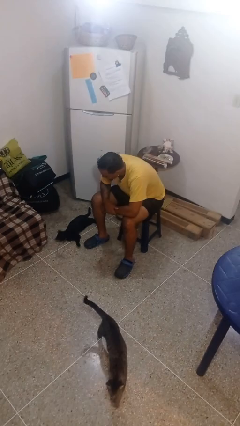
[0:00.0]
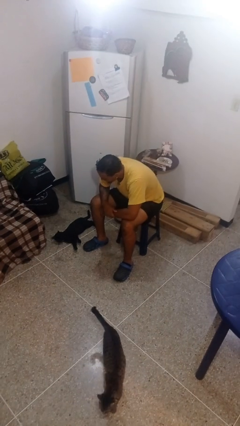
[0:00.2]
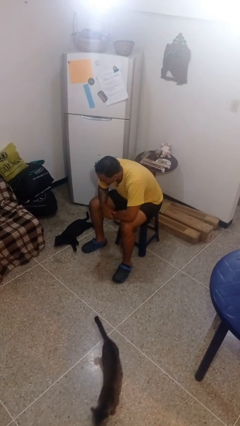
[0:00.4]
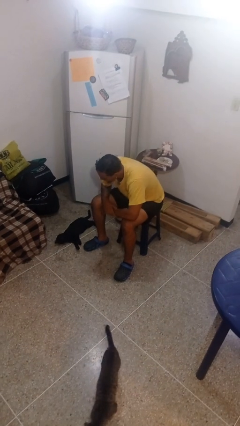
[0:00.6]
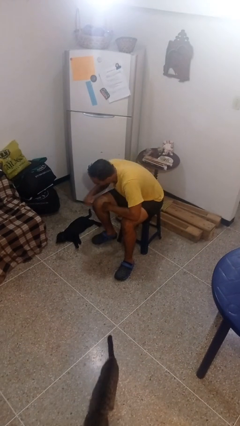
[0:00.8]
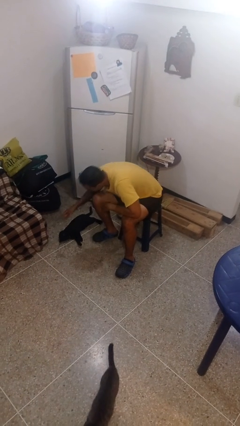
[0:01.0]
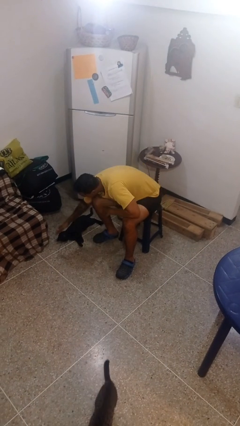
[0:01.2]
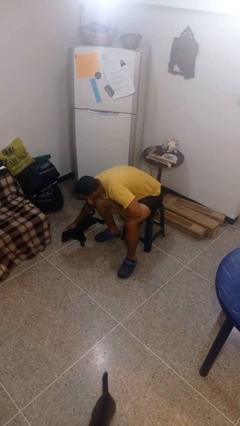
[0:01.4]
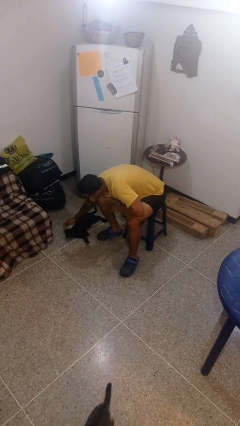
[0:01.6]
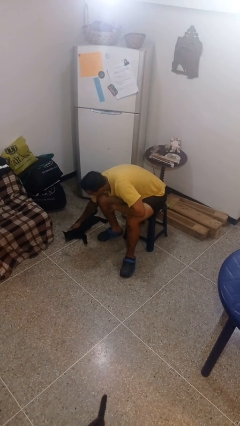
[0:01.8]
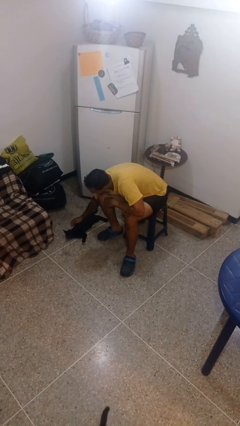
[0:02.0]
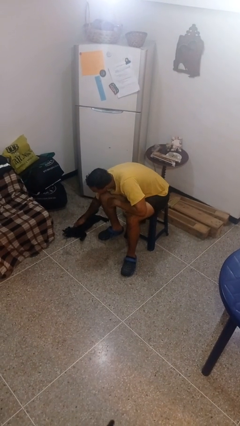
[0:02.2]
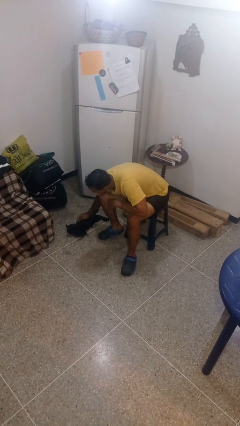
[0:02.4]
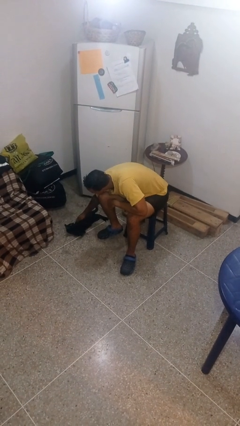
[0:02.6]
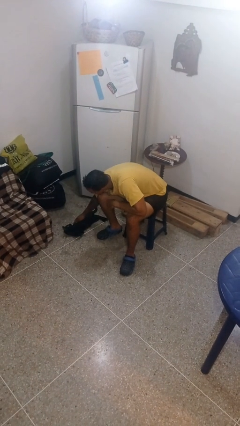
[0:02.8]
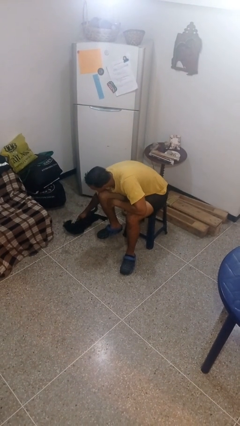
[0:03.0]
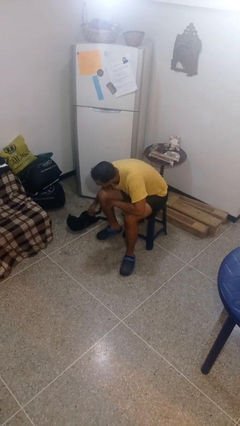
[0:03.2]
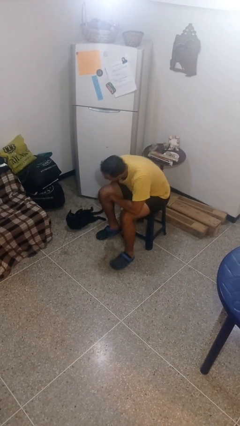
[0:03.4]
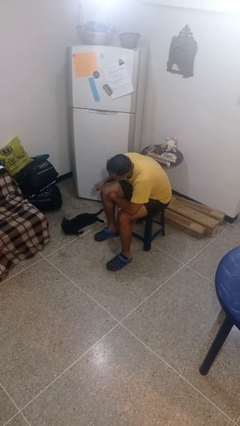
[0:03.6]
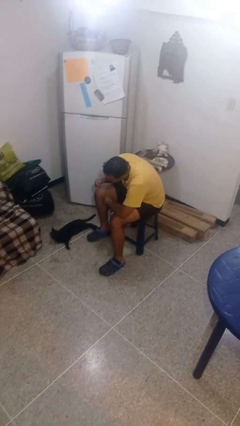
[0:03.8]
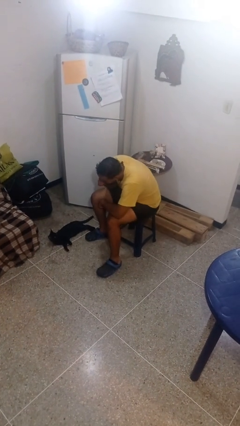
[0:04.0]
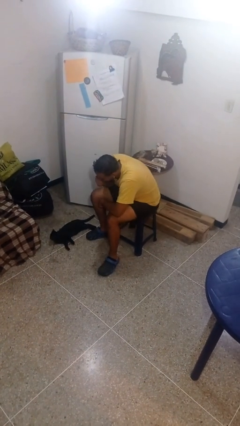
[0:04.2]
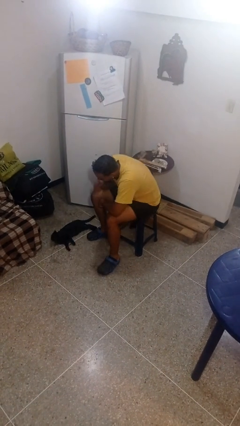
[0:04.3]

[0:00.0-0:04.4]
person pets cat

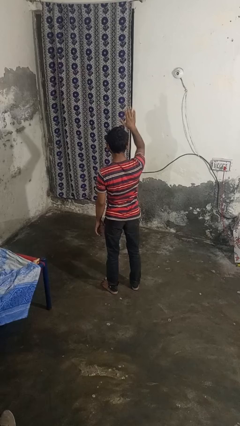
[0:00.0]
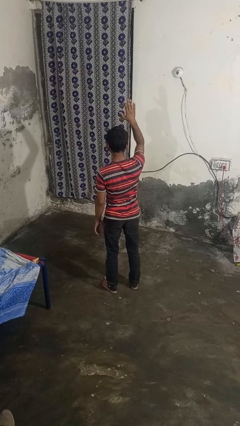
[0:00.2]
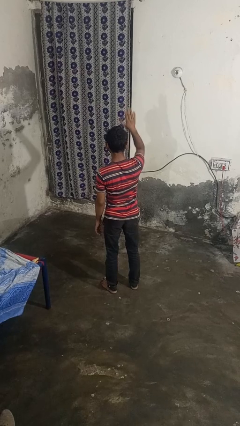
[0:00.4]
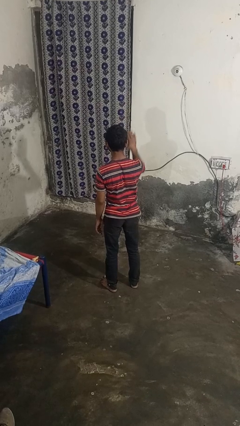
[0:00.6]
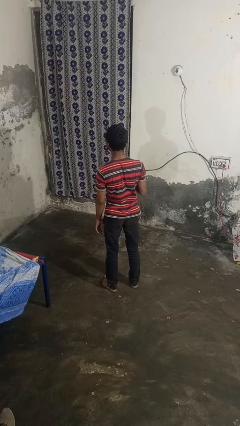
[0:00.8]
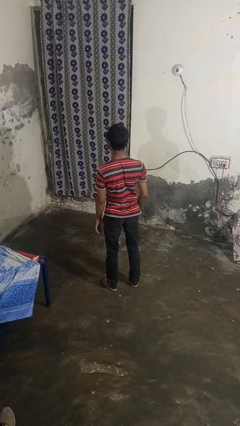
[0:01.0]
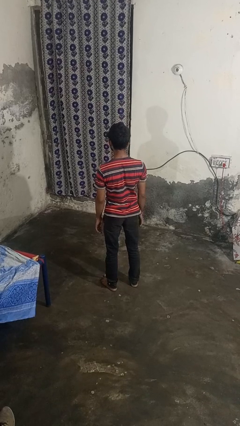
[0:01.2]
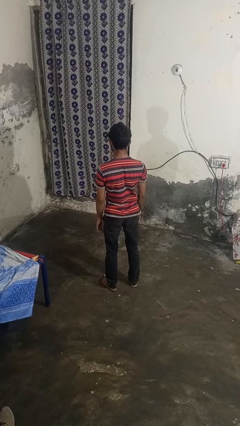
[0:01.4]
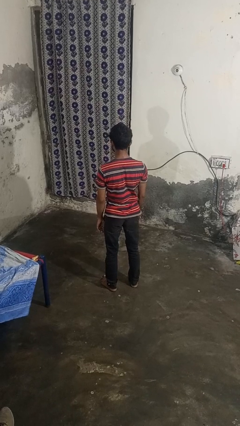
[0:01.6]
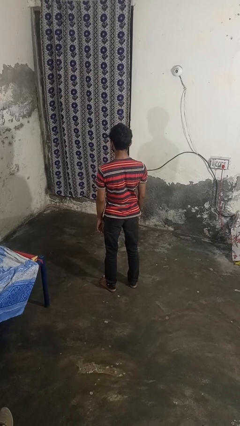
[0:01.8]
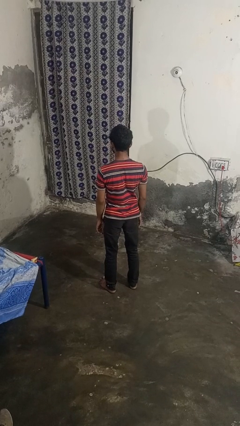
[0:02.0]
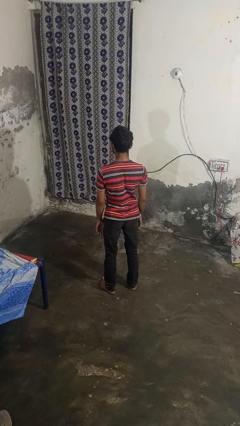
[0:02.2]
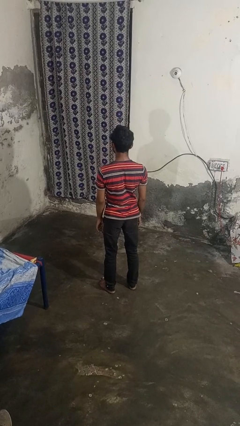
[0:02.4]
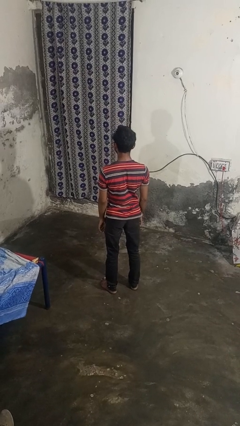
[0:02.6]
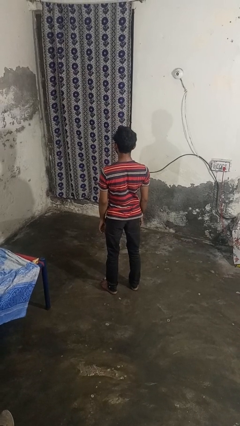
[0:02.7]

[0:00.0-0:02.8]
person gestures lower hand

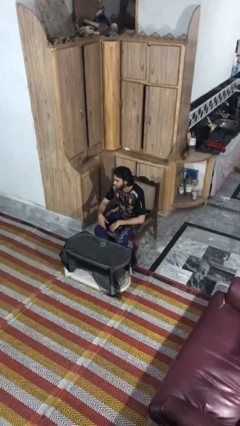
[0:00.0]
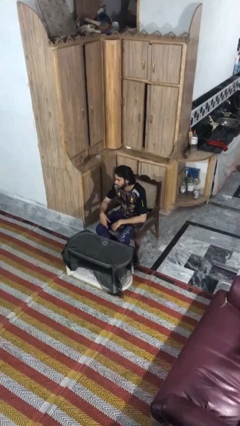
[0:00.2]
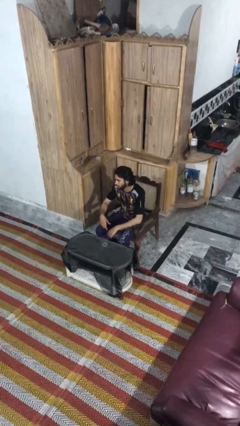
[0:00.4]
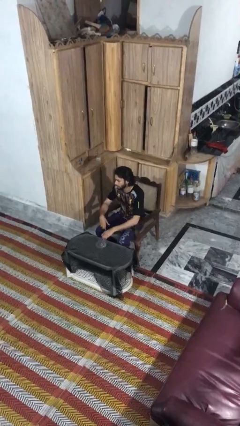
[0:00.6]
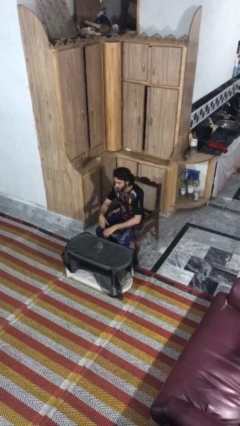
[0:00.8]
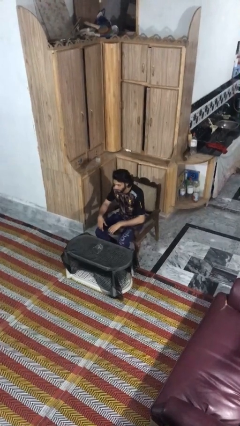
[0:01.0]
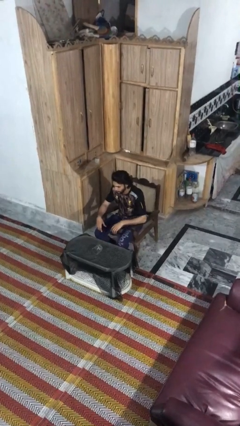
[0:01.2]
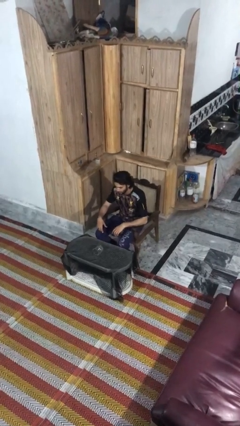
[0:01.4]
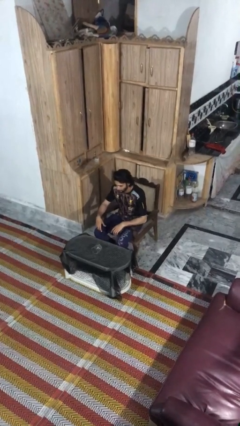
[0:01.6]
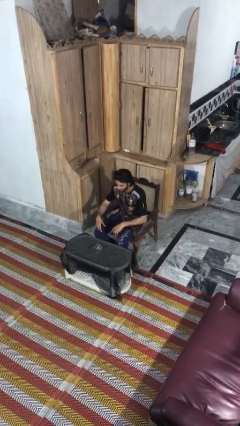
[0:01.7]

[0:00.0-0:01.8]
person knocks over glass

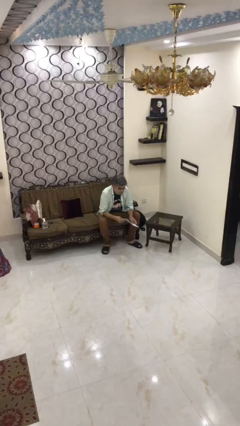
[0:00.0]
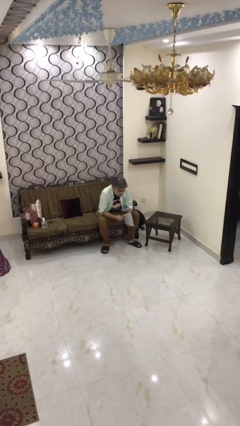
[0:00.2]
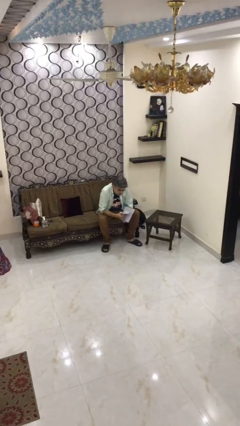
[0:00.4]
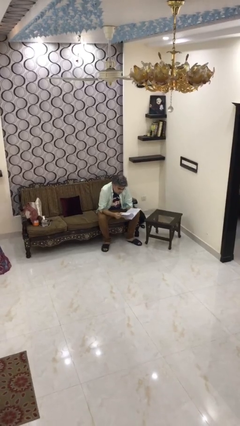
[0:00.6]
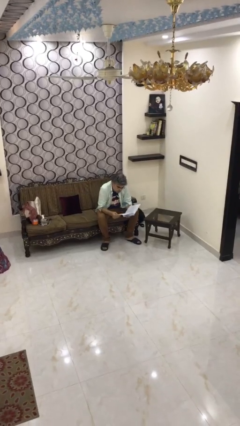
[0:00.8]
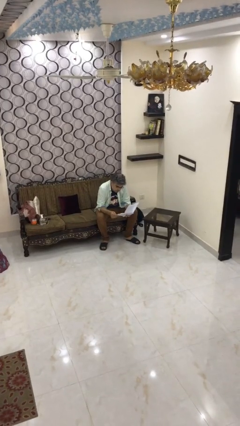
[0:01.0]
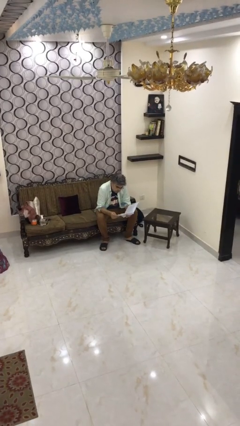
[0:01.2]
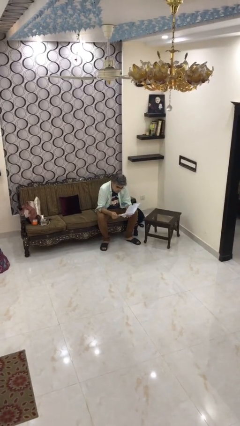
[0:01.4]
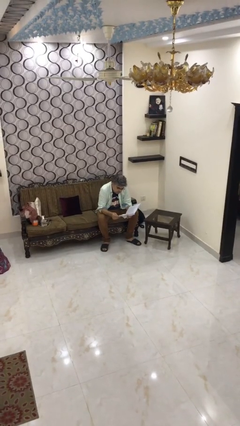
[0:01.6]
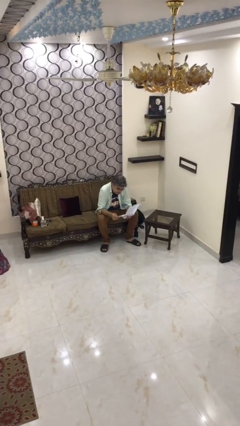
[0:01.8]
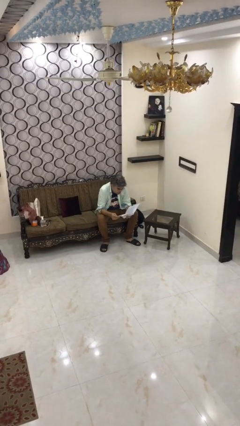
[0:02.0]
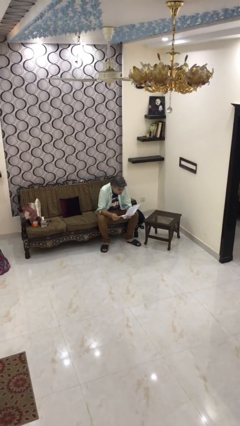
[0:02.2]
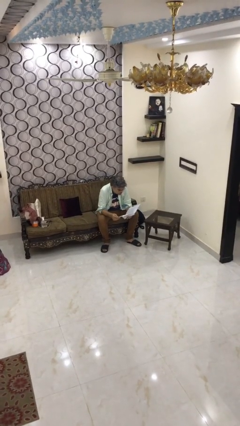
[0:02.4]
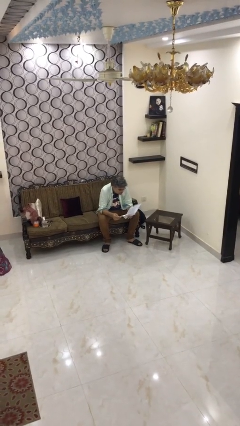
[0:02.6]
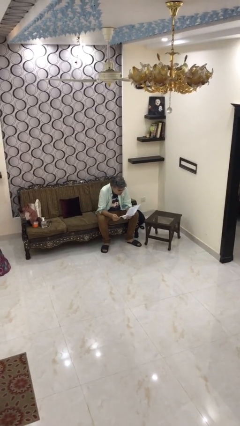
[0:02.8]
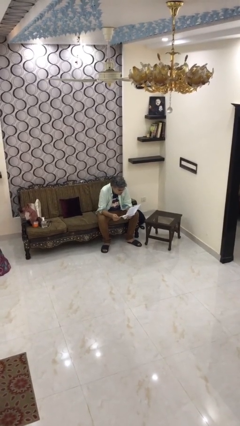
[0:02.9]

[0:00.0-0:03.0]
person reads document

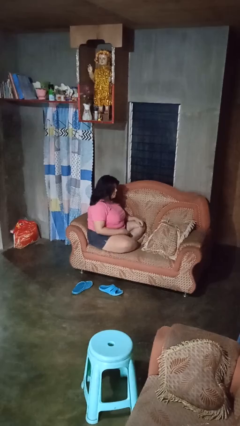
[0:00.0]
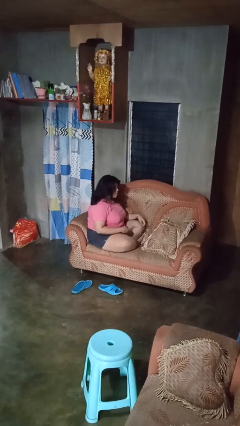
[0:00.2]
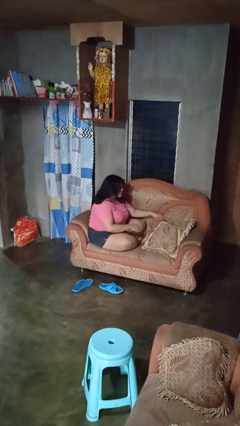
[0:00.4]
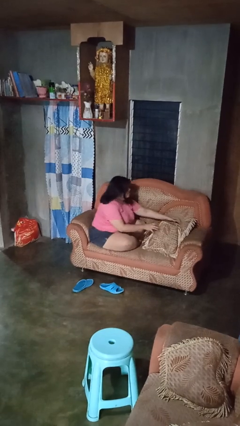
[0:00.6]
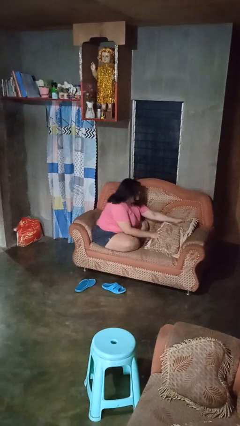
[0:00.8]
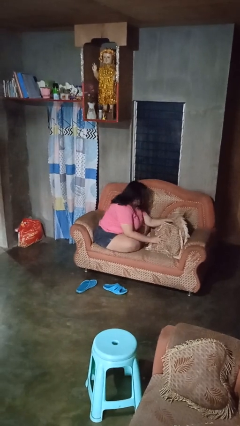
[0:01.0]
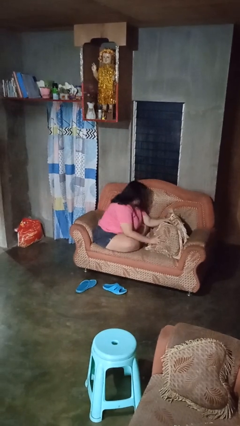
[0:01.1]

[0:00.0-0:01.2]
person searches in couch

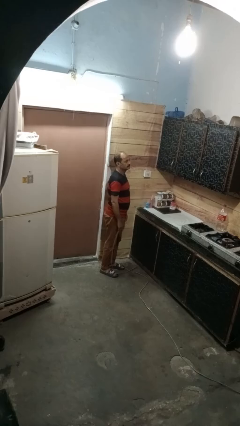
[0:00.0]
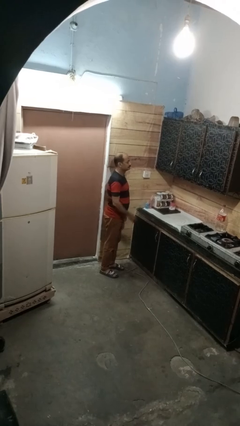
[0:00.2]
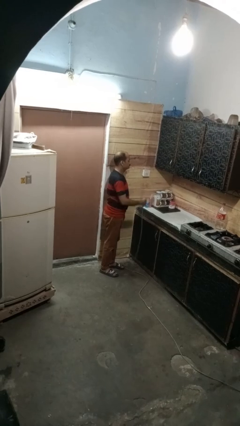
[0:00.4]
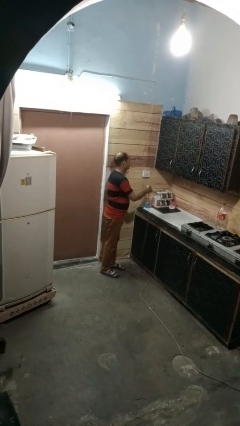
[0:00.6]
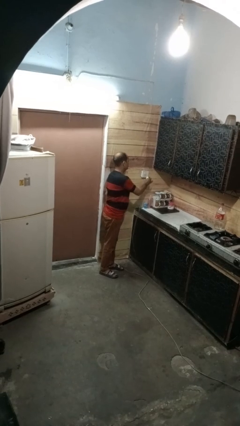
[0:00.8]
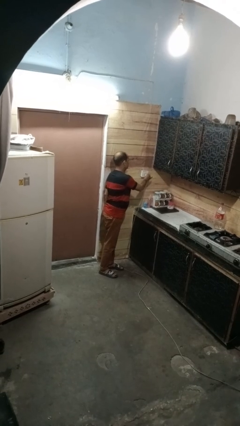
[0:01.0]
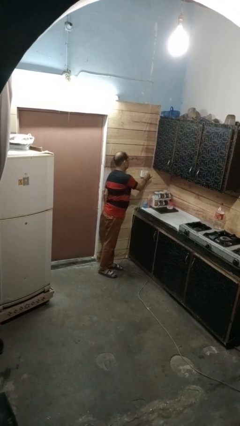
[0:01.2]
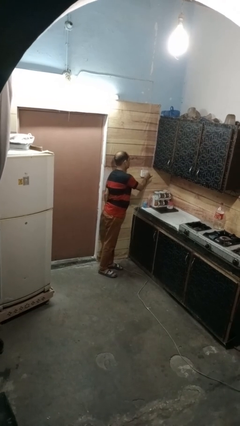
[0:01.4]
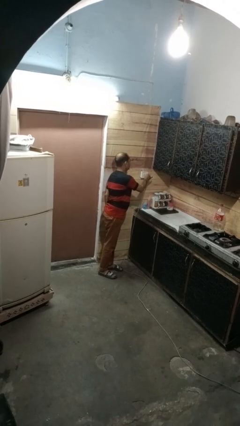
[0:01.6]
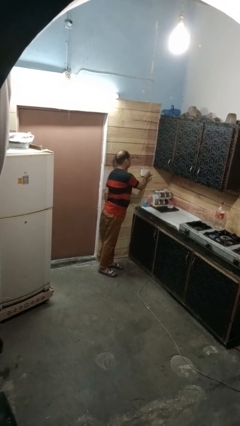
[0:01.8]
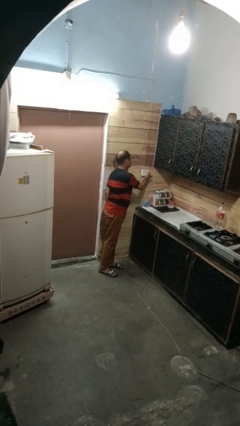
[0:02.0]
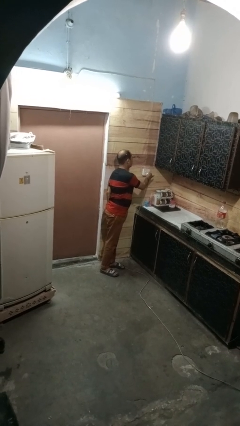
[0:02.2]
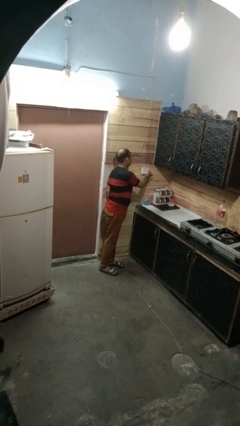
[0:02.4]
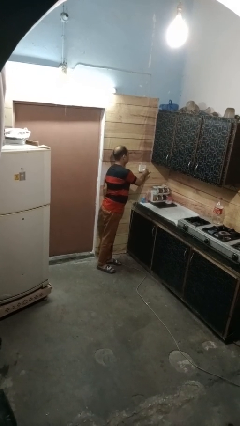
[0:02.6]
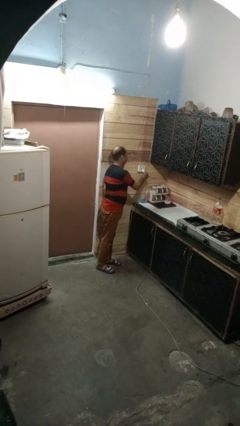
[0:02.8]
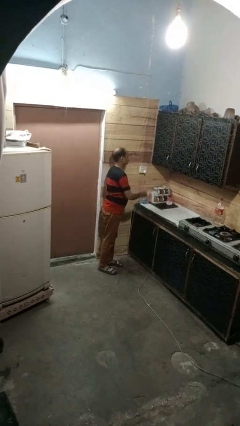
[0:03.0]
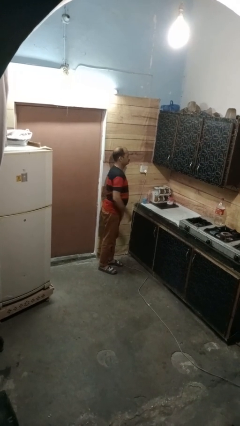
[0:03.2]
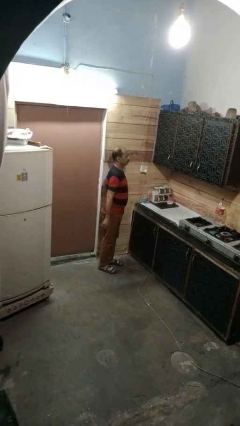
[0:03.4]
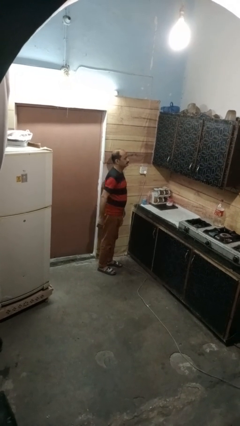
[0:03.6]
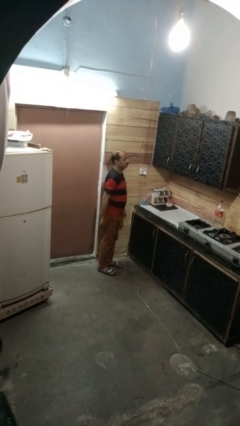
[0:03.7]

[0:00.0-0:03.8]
person plugs into electrical socket

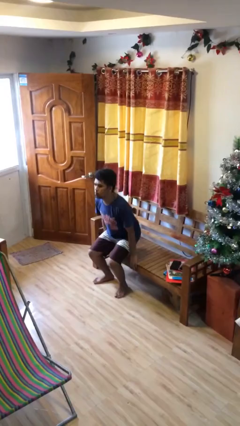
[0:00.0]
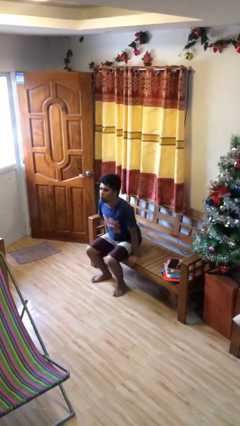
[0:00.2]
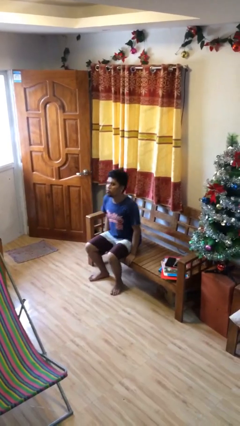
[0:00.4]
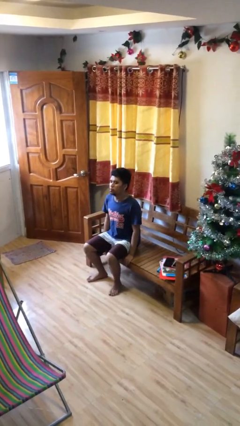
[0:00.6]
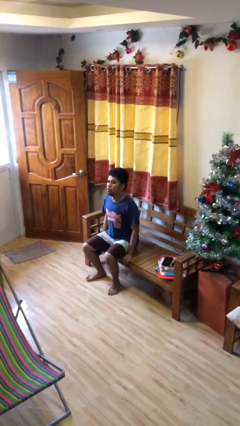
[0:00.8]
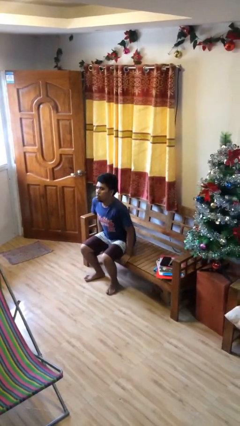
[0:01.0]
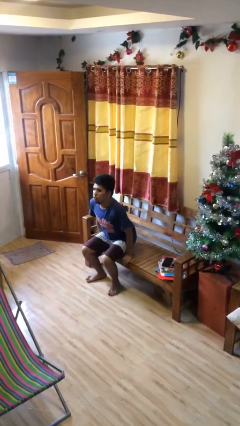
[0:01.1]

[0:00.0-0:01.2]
person sits down
